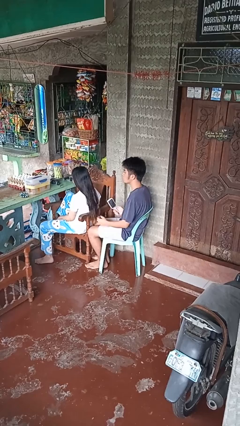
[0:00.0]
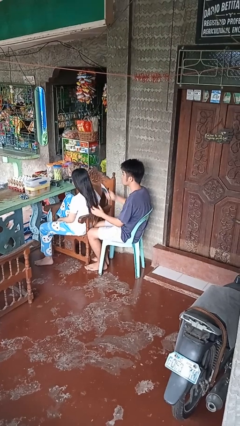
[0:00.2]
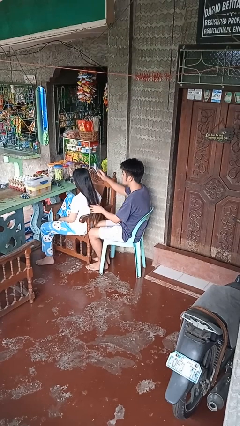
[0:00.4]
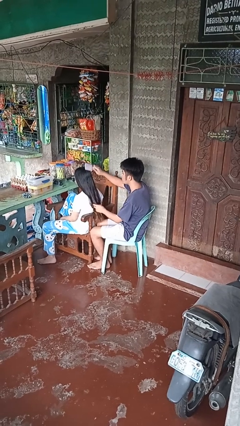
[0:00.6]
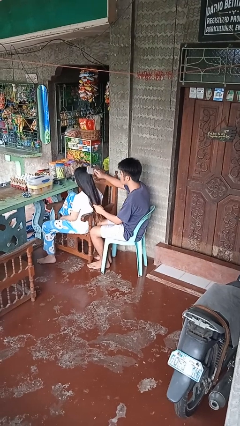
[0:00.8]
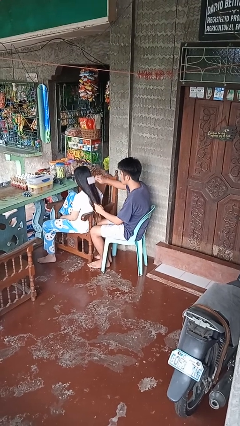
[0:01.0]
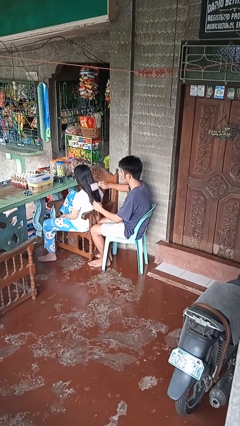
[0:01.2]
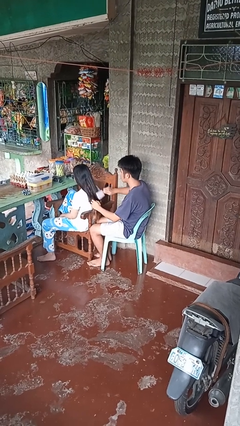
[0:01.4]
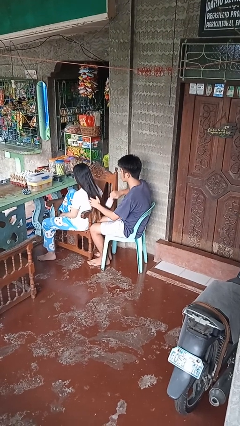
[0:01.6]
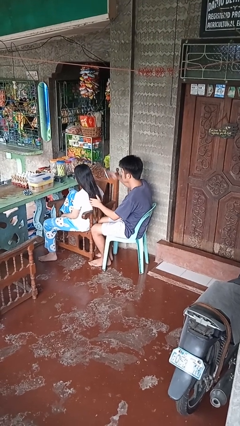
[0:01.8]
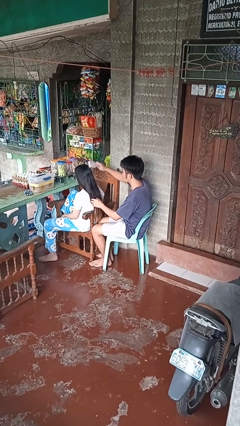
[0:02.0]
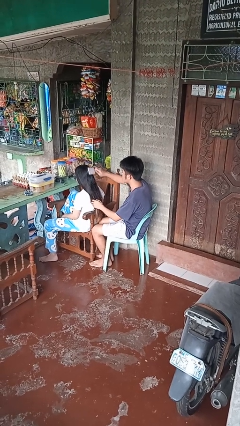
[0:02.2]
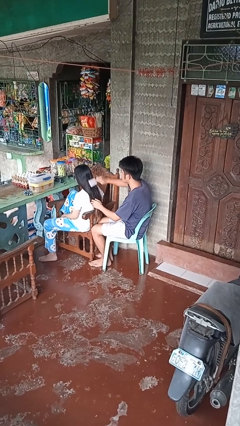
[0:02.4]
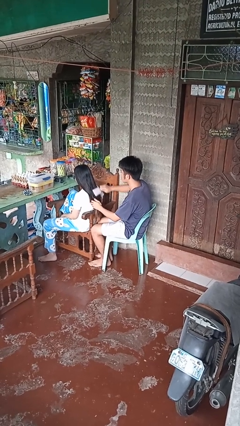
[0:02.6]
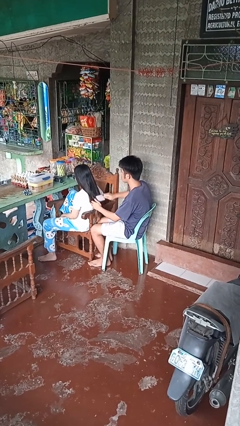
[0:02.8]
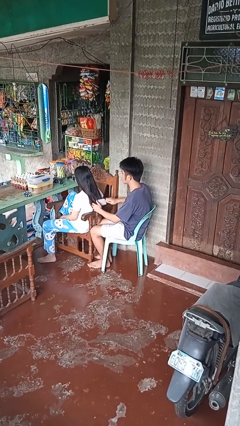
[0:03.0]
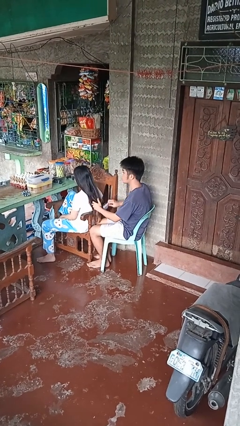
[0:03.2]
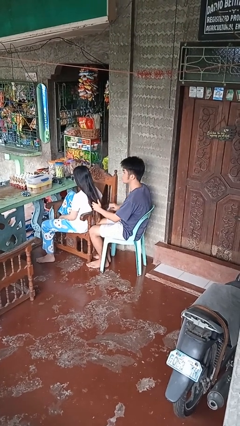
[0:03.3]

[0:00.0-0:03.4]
person brushes hair of person

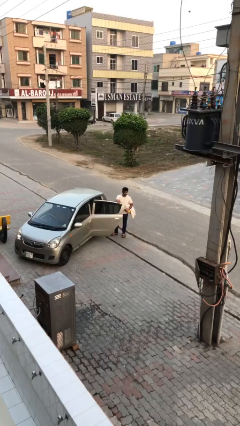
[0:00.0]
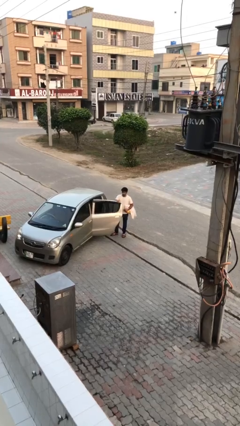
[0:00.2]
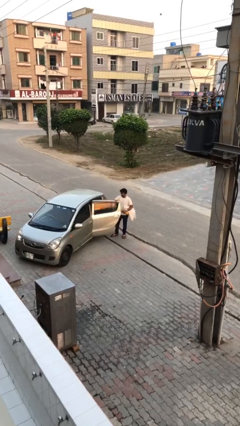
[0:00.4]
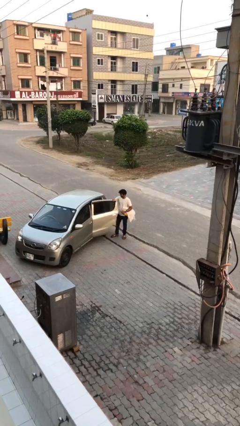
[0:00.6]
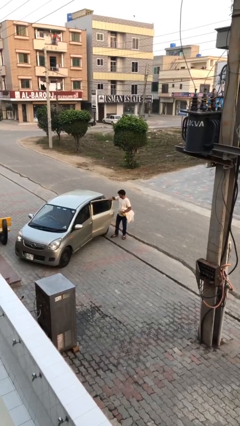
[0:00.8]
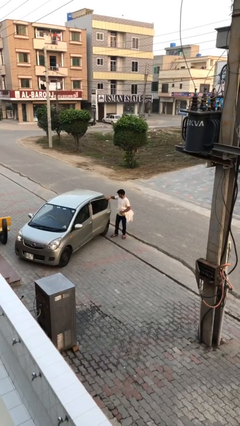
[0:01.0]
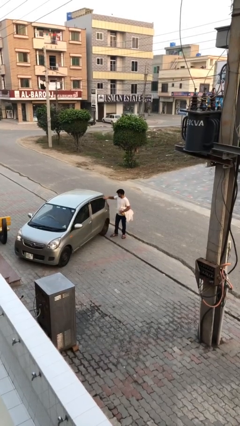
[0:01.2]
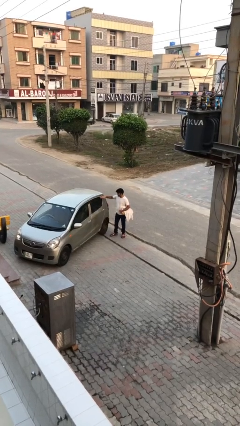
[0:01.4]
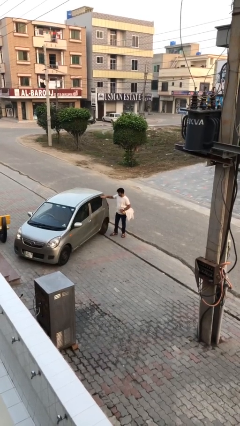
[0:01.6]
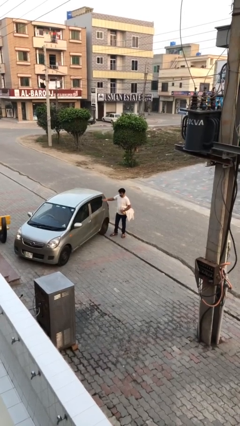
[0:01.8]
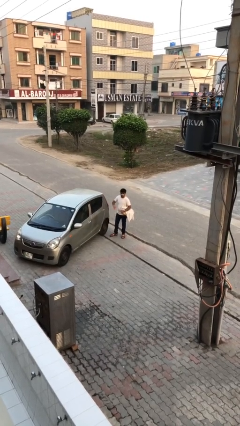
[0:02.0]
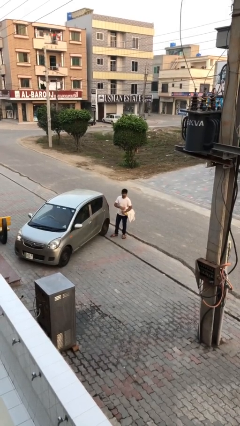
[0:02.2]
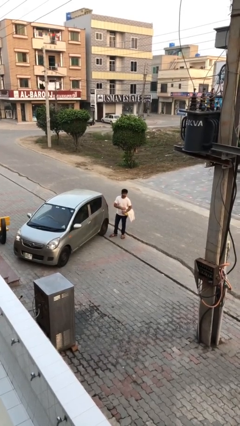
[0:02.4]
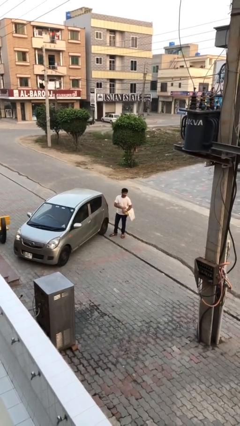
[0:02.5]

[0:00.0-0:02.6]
person closes car door

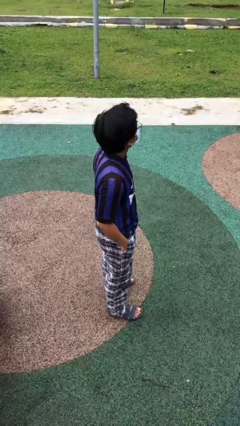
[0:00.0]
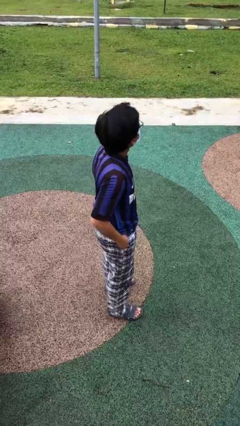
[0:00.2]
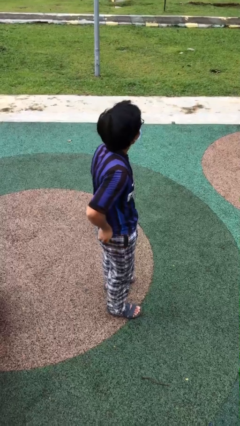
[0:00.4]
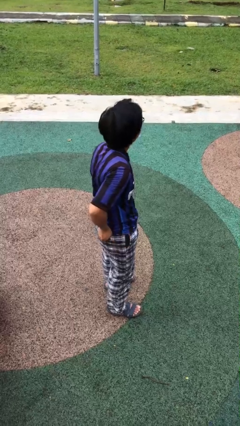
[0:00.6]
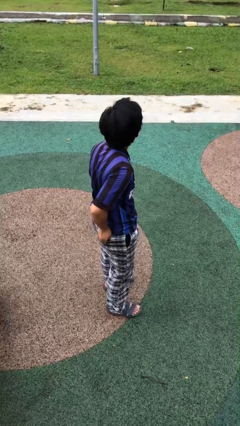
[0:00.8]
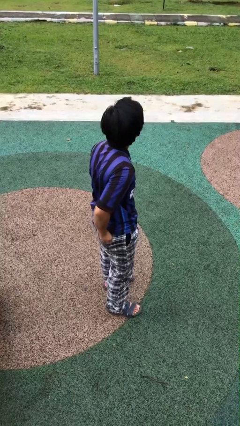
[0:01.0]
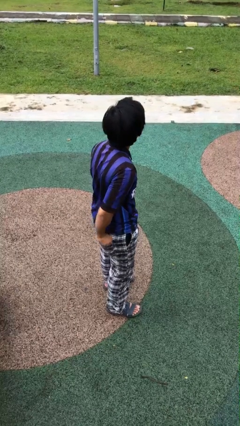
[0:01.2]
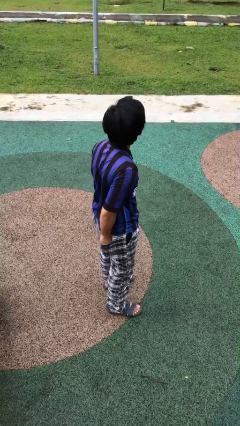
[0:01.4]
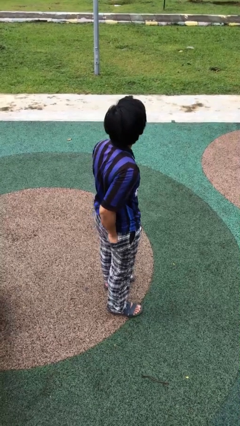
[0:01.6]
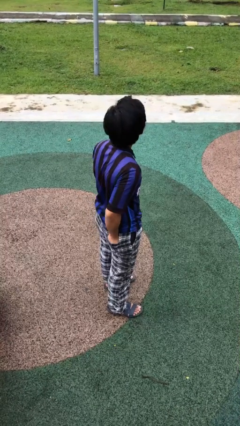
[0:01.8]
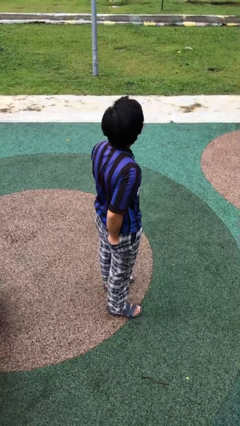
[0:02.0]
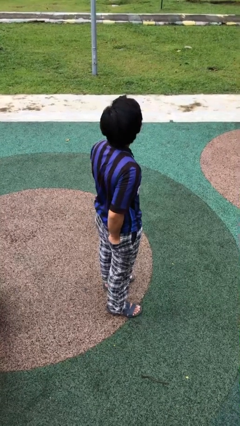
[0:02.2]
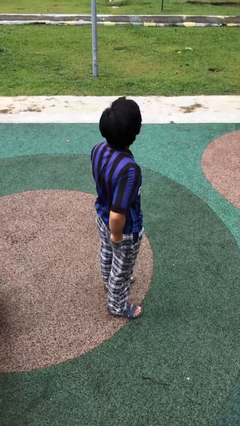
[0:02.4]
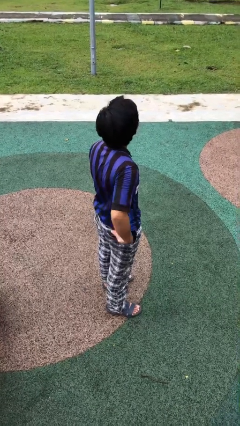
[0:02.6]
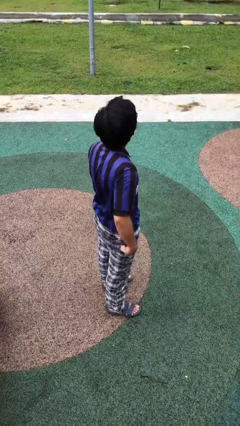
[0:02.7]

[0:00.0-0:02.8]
person puts hands in back pockets

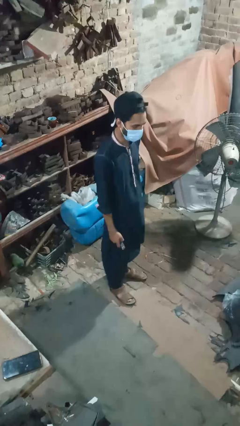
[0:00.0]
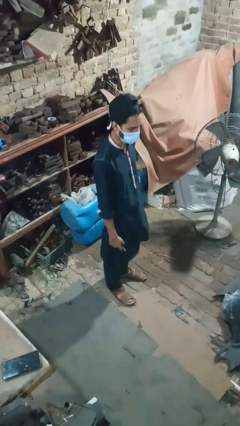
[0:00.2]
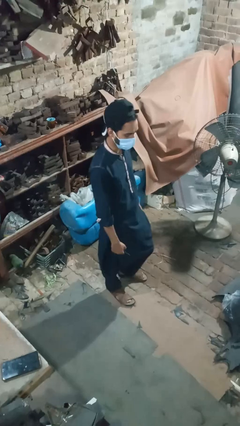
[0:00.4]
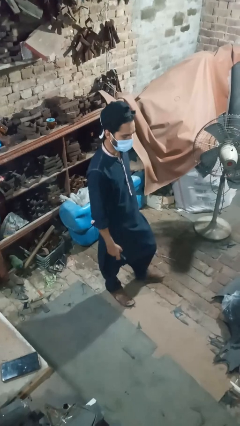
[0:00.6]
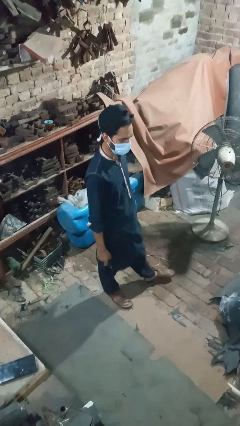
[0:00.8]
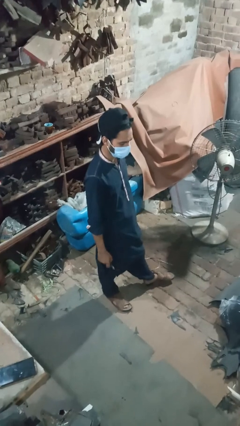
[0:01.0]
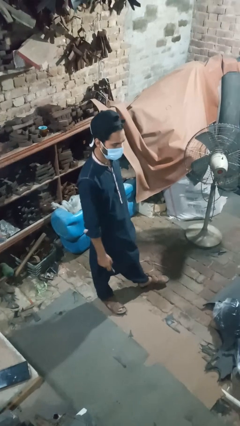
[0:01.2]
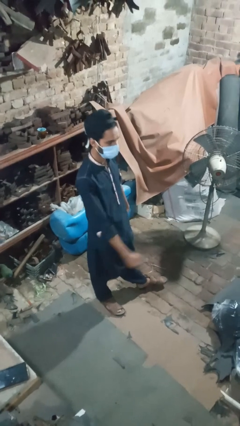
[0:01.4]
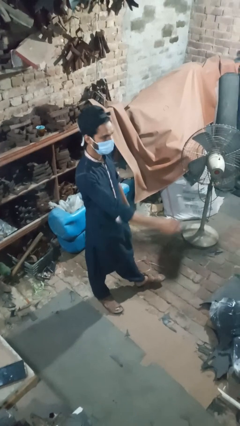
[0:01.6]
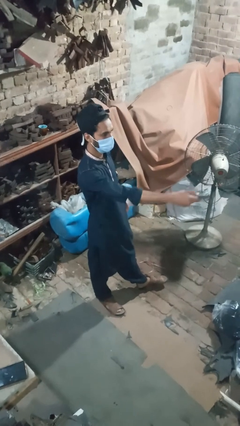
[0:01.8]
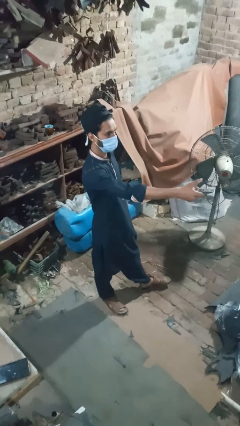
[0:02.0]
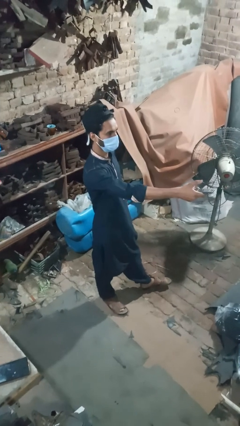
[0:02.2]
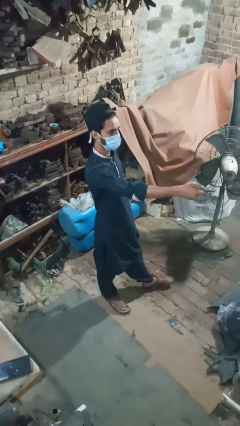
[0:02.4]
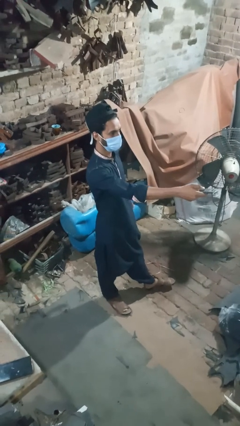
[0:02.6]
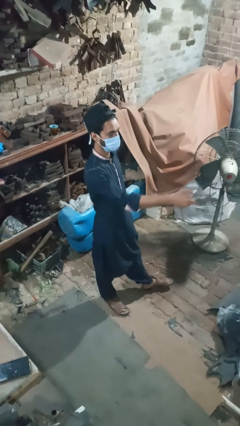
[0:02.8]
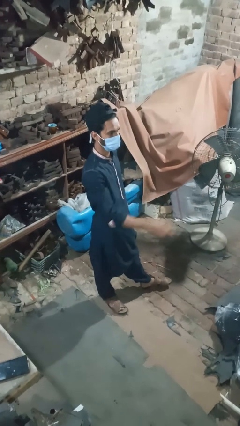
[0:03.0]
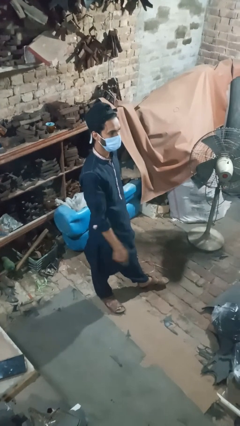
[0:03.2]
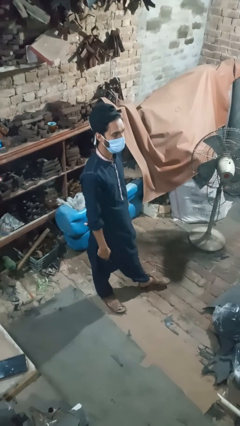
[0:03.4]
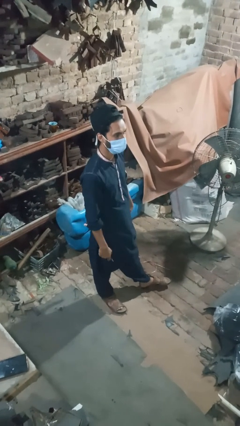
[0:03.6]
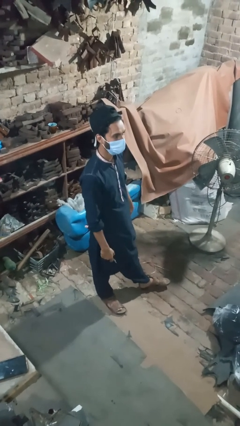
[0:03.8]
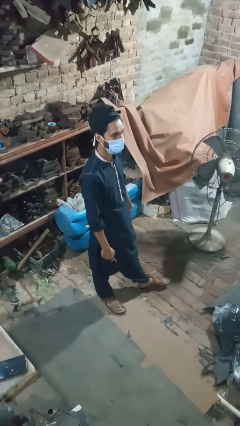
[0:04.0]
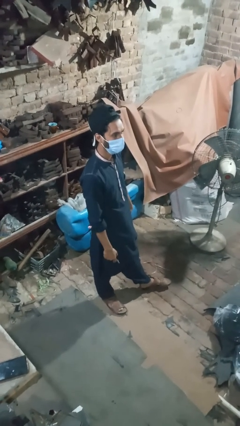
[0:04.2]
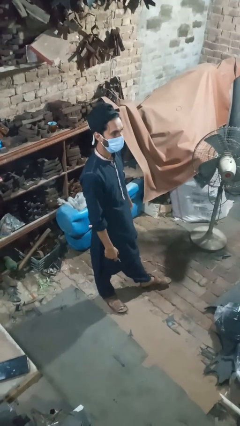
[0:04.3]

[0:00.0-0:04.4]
person uses television remote

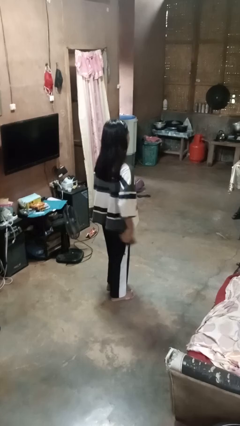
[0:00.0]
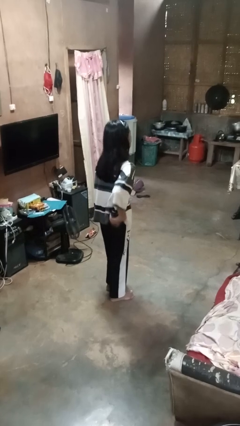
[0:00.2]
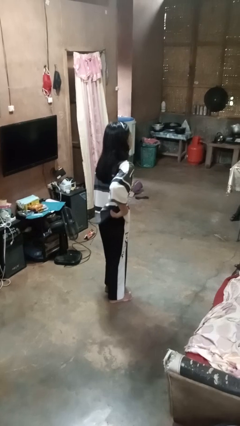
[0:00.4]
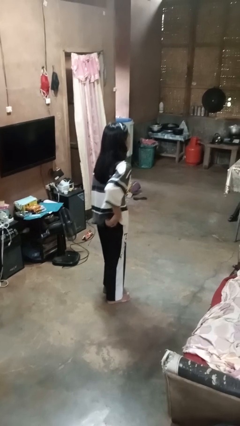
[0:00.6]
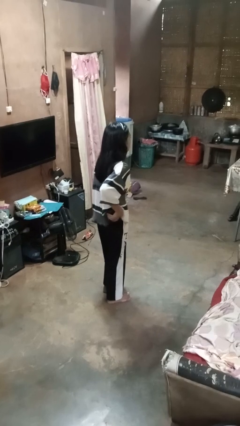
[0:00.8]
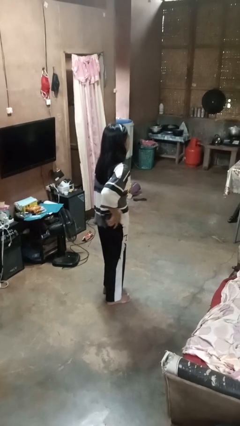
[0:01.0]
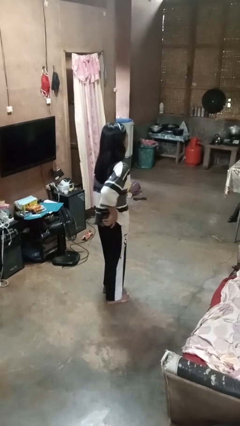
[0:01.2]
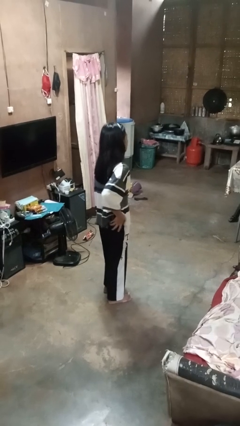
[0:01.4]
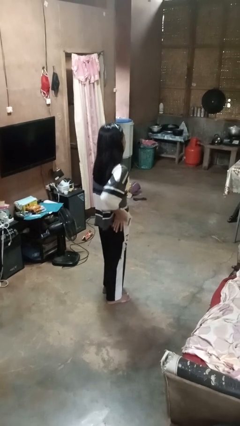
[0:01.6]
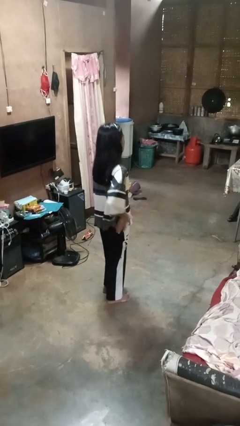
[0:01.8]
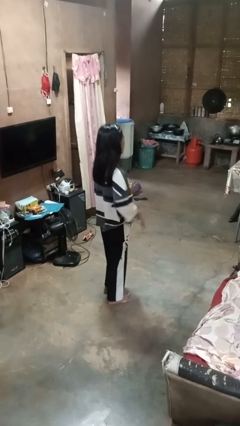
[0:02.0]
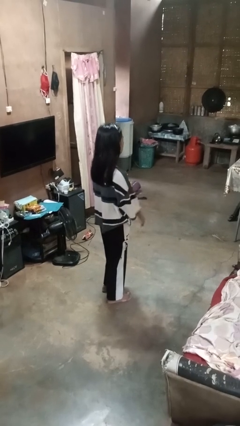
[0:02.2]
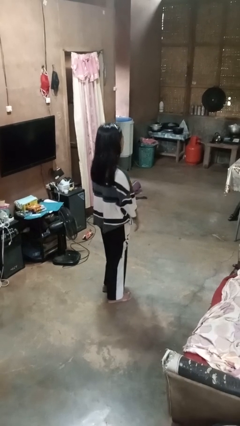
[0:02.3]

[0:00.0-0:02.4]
person puts phone into pocket

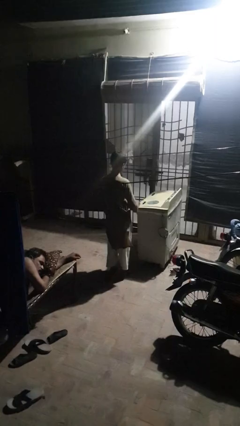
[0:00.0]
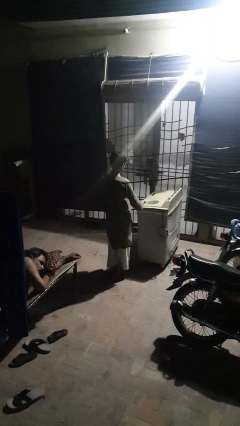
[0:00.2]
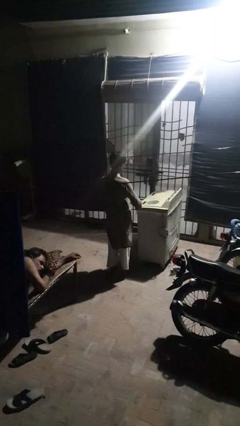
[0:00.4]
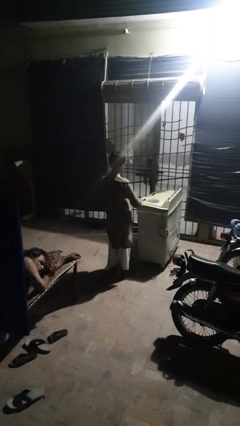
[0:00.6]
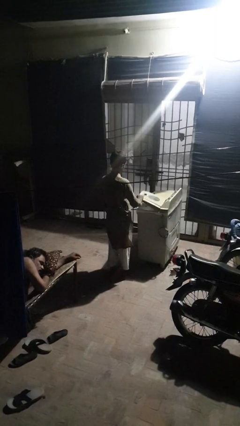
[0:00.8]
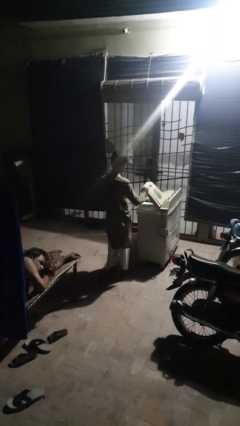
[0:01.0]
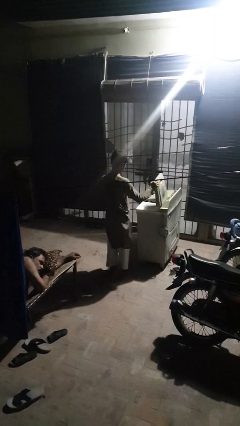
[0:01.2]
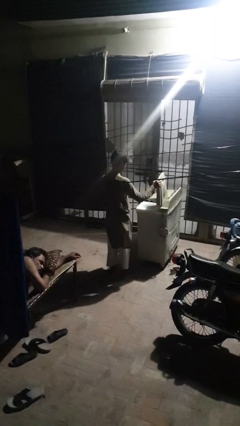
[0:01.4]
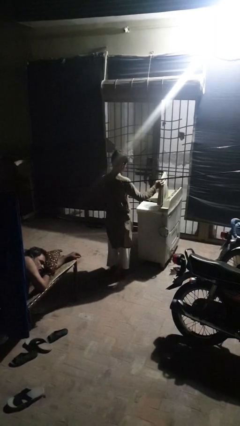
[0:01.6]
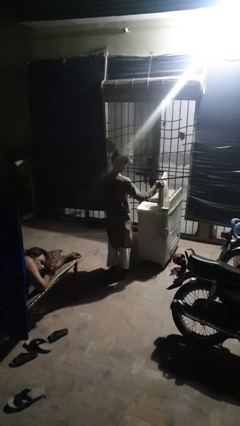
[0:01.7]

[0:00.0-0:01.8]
person opens clothes washer
